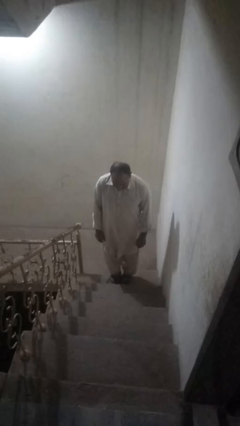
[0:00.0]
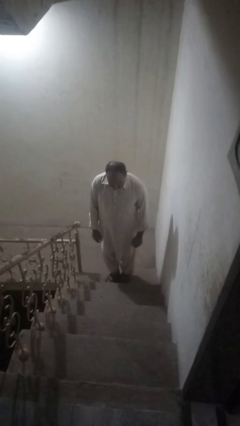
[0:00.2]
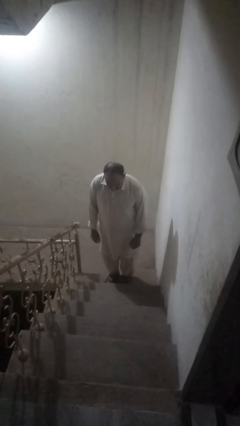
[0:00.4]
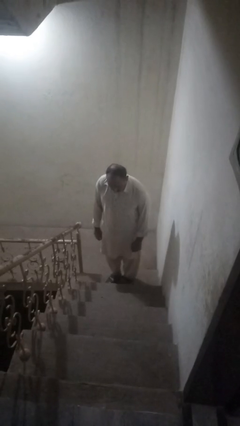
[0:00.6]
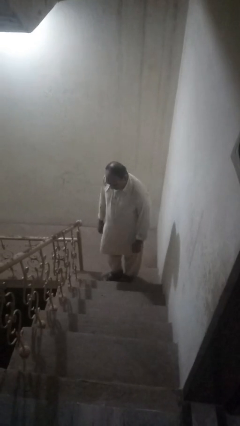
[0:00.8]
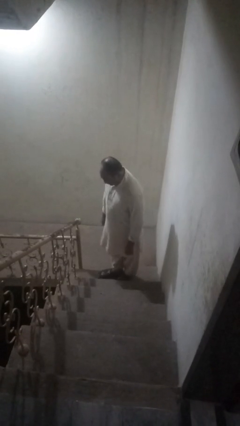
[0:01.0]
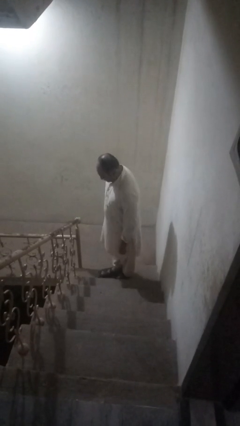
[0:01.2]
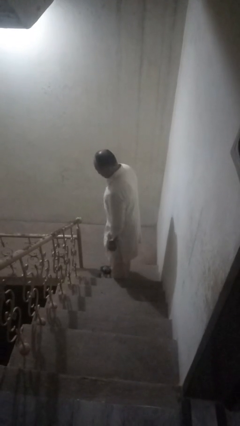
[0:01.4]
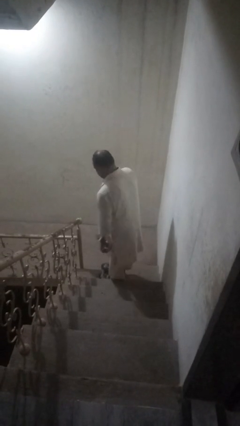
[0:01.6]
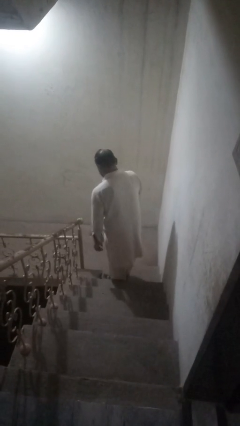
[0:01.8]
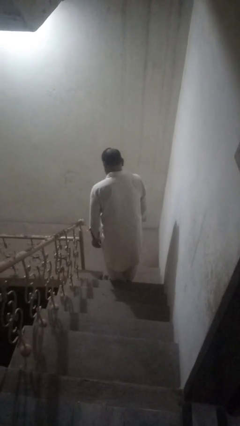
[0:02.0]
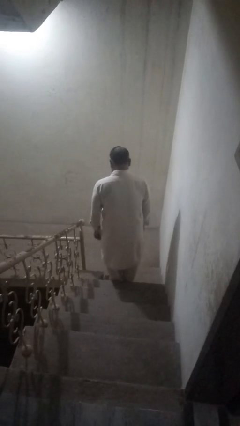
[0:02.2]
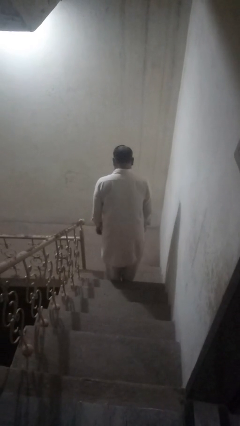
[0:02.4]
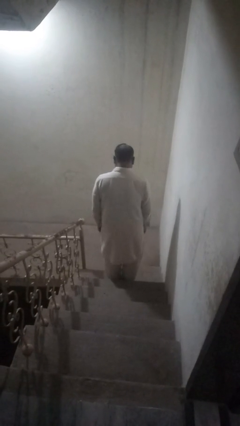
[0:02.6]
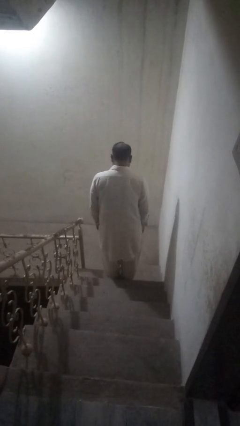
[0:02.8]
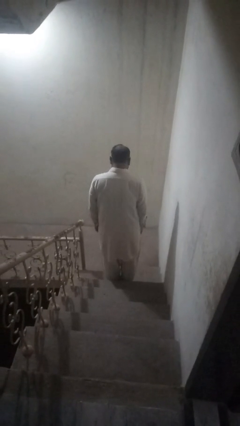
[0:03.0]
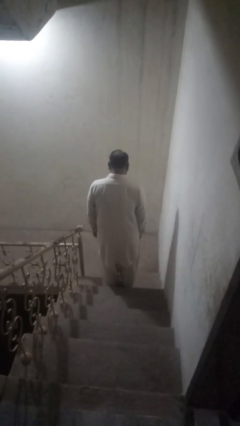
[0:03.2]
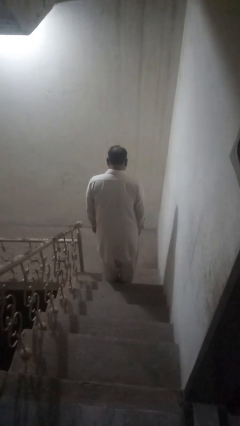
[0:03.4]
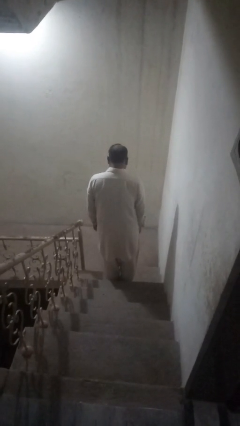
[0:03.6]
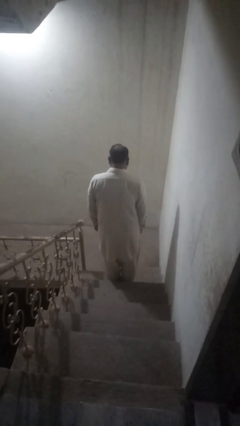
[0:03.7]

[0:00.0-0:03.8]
person climbs up stairs

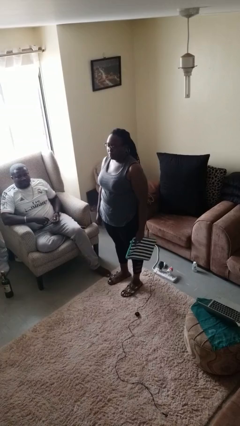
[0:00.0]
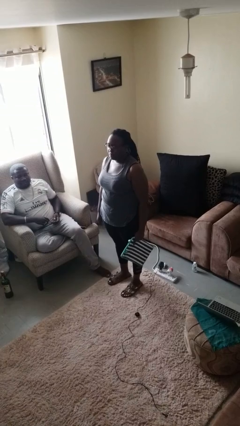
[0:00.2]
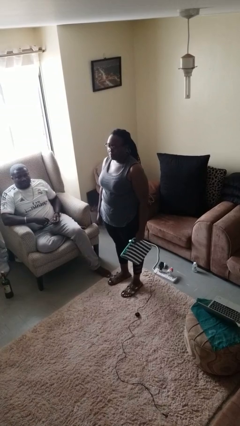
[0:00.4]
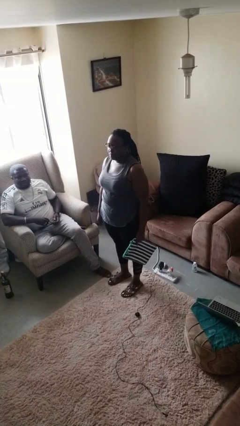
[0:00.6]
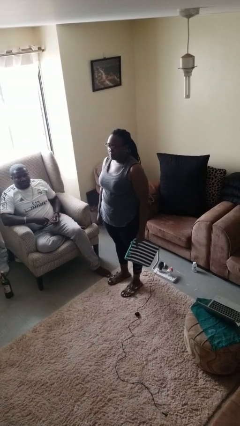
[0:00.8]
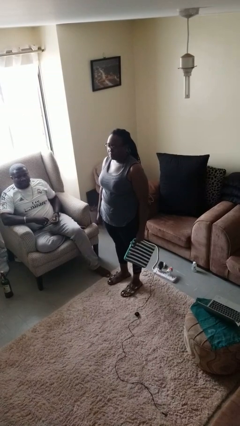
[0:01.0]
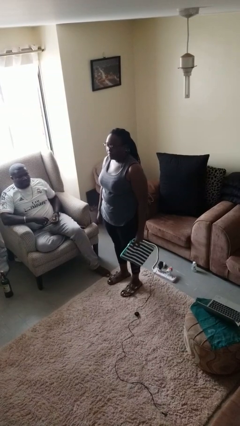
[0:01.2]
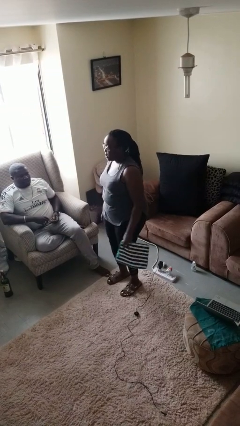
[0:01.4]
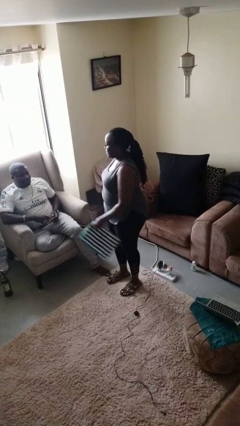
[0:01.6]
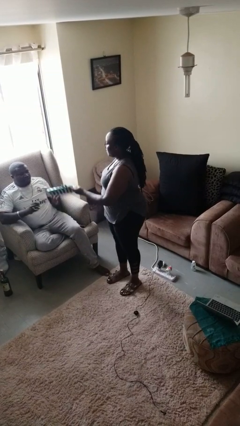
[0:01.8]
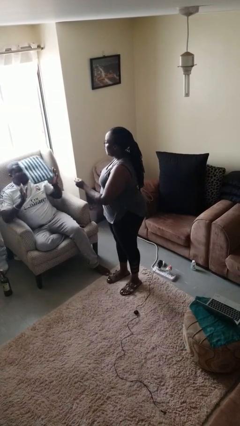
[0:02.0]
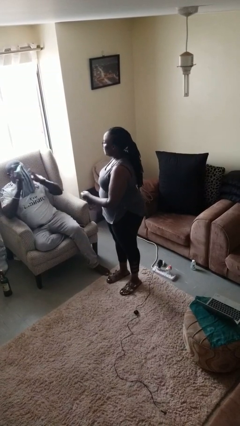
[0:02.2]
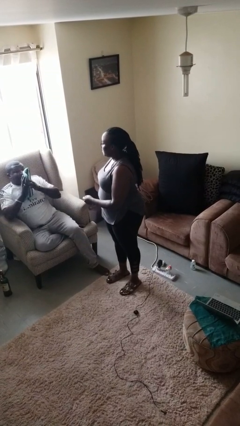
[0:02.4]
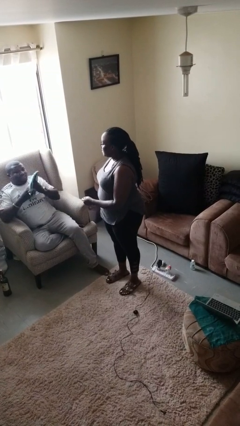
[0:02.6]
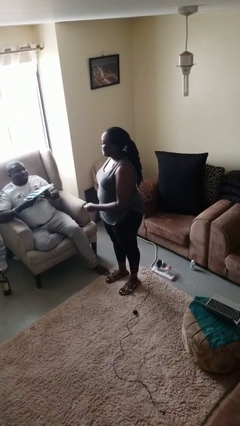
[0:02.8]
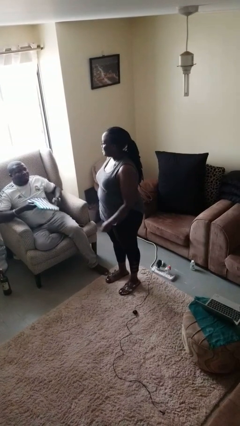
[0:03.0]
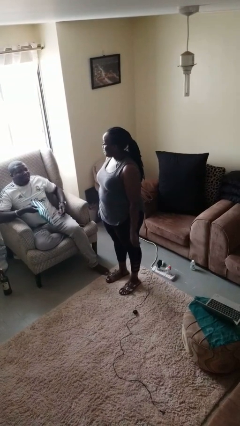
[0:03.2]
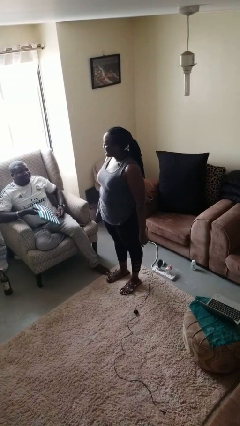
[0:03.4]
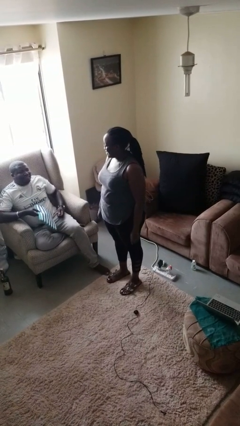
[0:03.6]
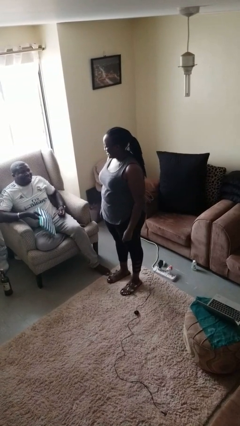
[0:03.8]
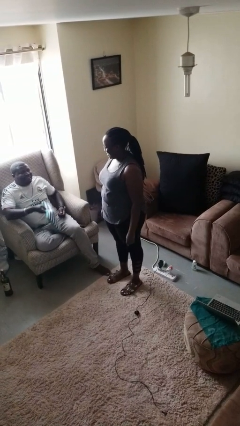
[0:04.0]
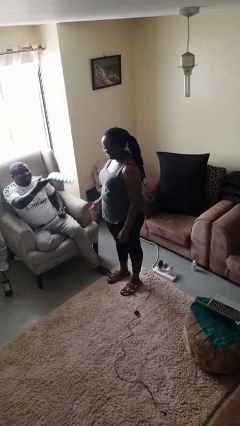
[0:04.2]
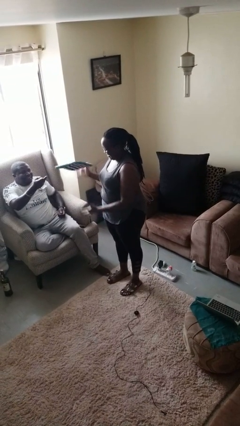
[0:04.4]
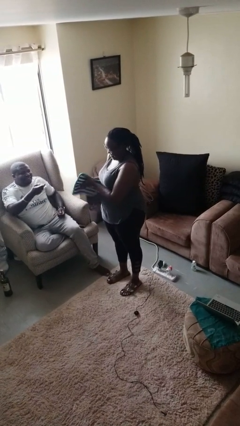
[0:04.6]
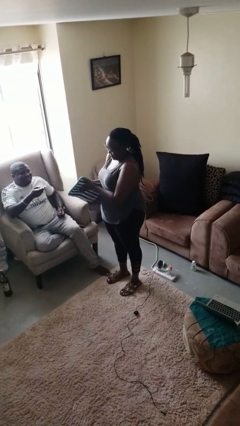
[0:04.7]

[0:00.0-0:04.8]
person throws object to person

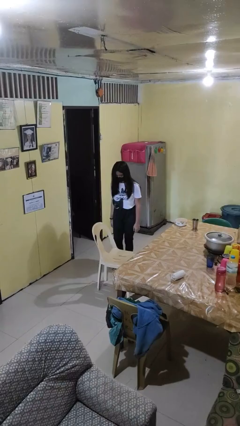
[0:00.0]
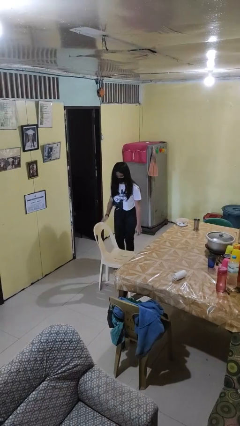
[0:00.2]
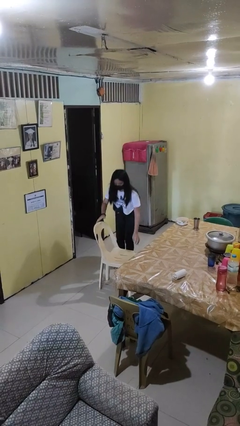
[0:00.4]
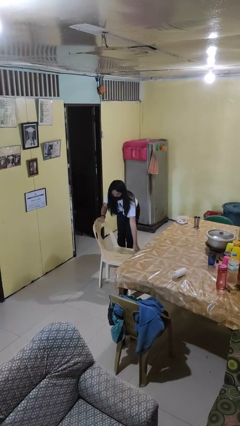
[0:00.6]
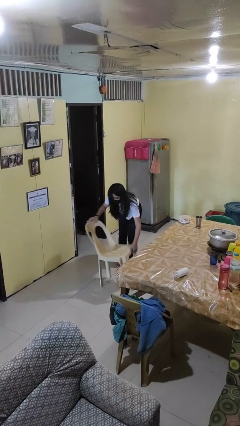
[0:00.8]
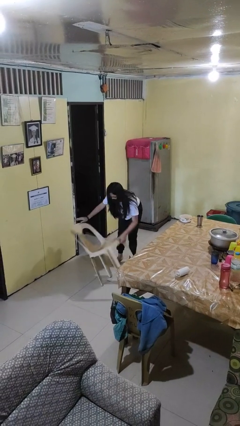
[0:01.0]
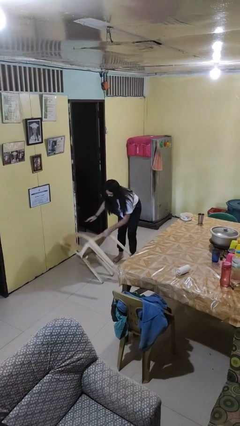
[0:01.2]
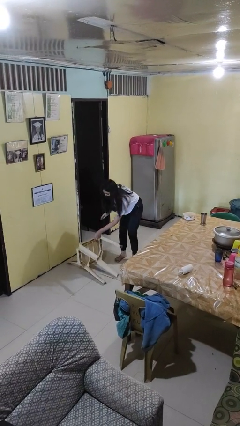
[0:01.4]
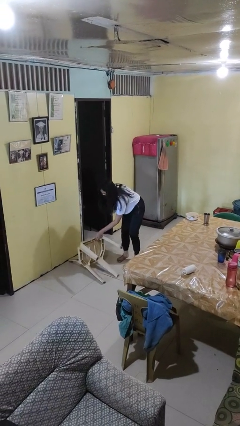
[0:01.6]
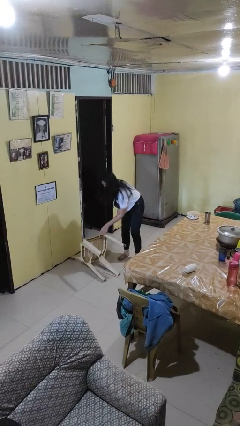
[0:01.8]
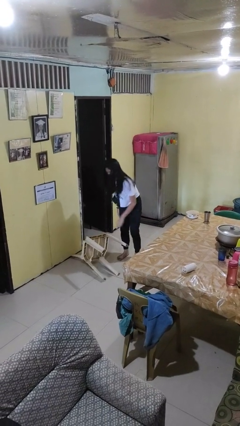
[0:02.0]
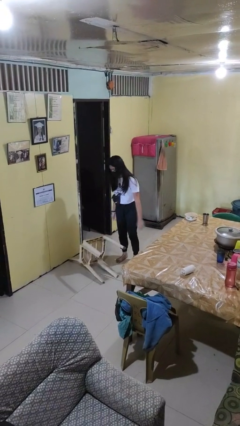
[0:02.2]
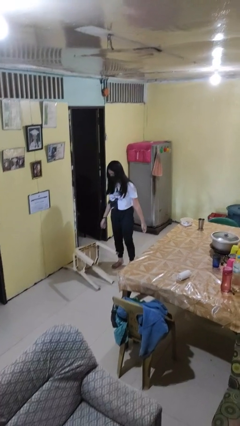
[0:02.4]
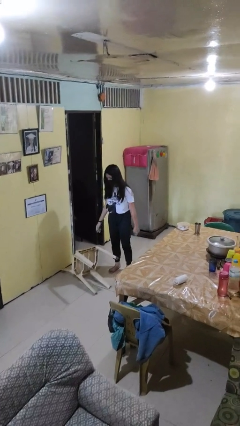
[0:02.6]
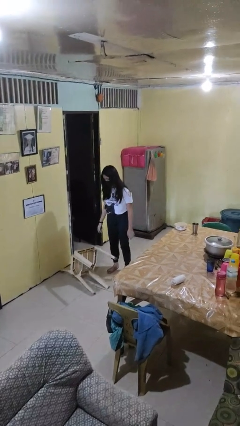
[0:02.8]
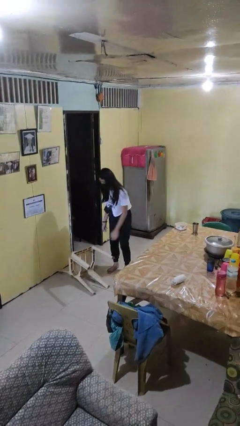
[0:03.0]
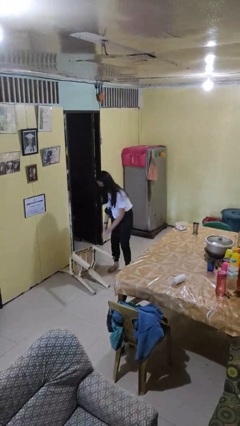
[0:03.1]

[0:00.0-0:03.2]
person knocks over furniture

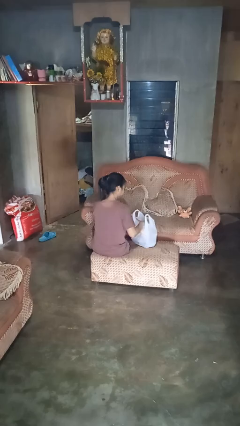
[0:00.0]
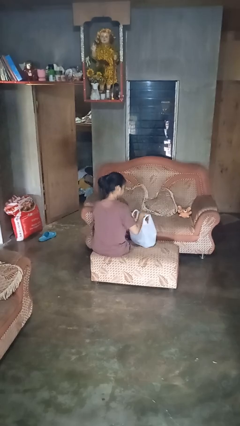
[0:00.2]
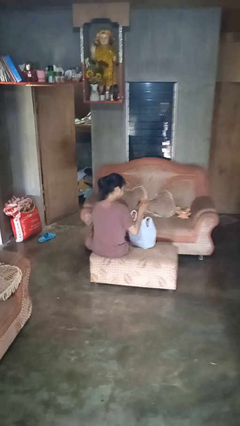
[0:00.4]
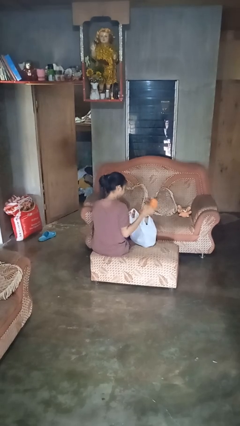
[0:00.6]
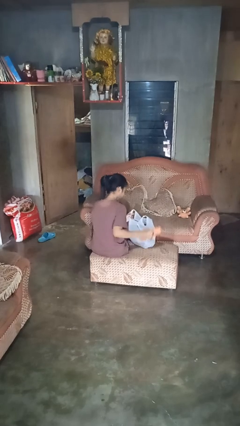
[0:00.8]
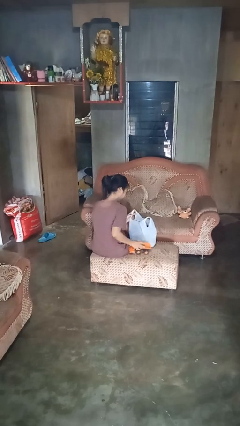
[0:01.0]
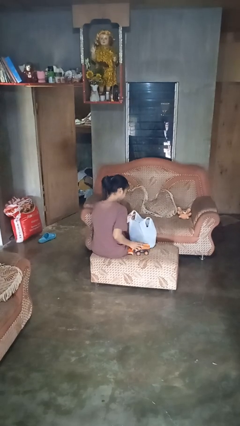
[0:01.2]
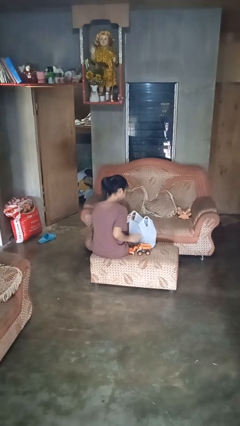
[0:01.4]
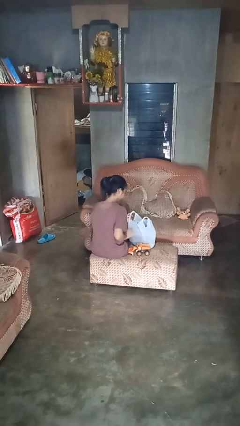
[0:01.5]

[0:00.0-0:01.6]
person takes object from bag

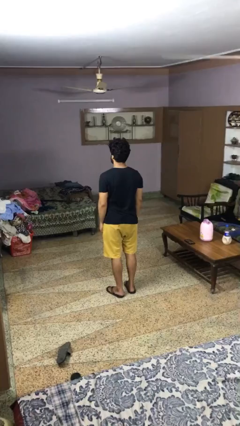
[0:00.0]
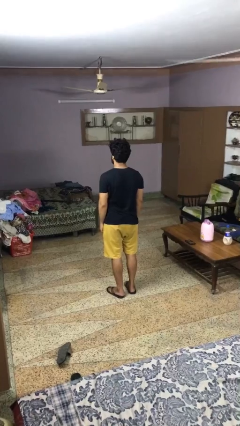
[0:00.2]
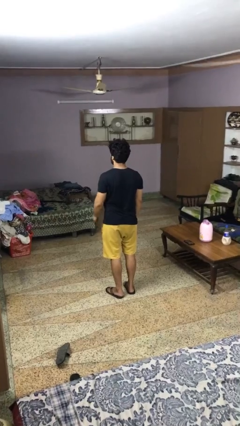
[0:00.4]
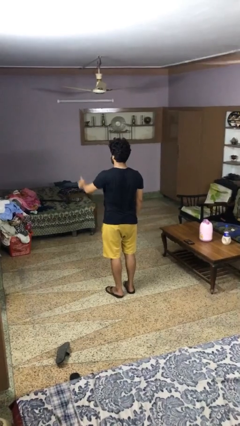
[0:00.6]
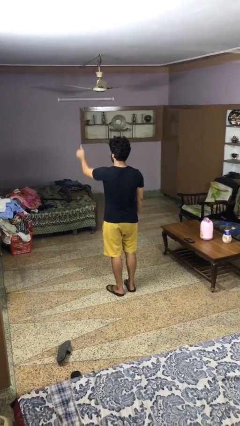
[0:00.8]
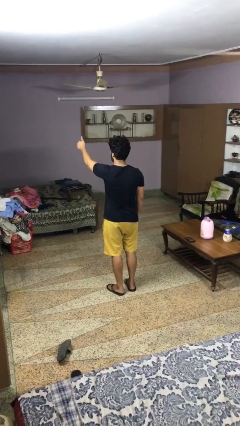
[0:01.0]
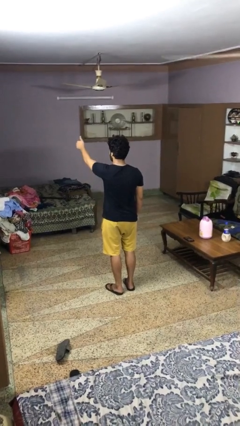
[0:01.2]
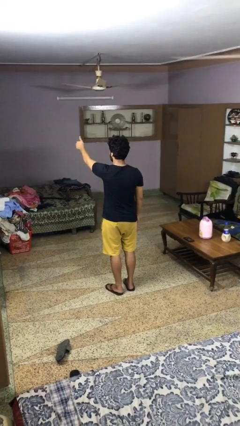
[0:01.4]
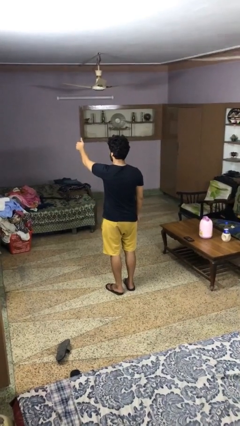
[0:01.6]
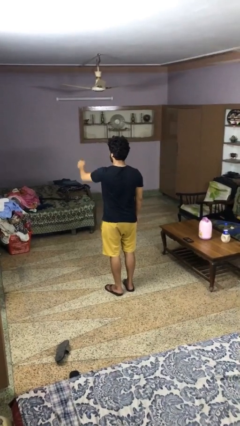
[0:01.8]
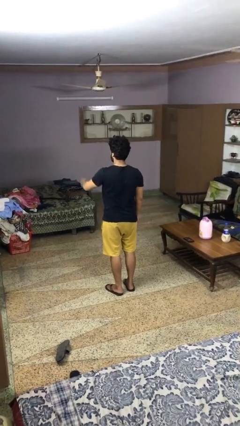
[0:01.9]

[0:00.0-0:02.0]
person gestures thumbs up

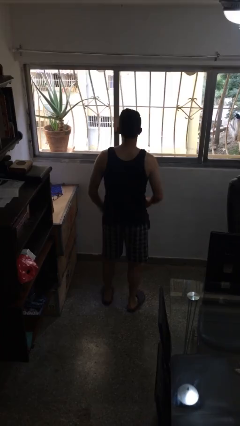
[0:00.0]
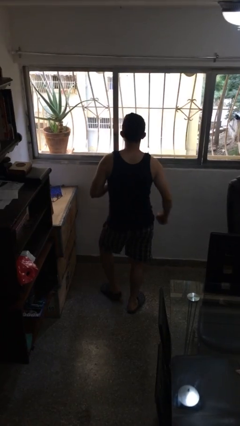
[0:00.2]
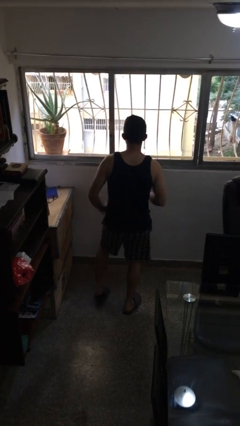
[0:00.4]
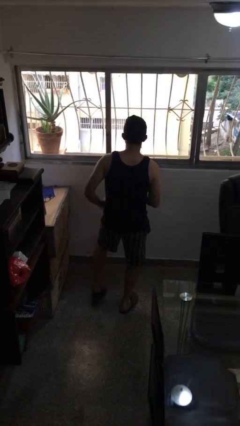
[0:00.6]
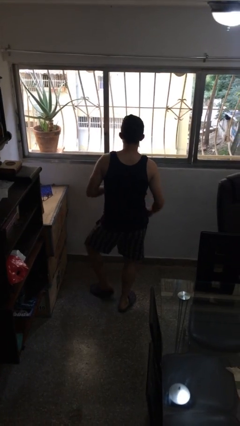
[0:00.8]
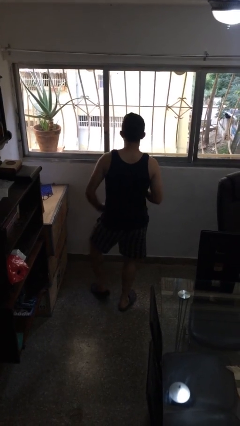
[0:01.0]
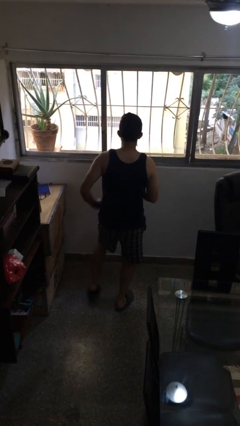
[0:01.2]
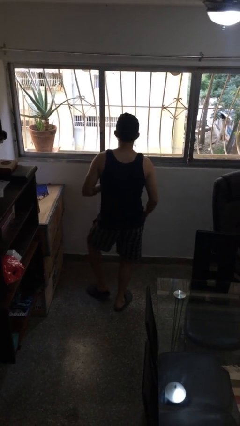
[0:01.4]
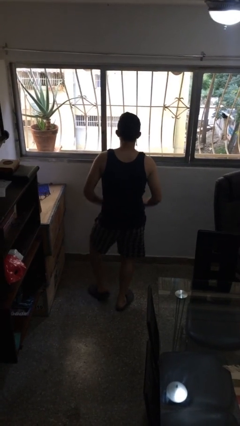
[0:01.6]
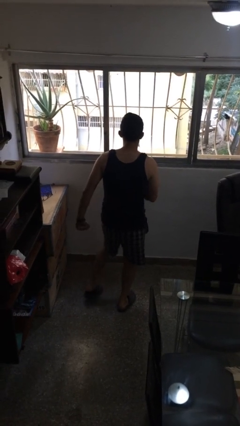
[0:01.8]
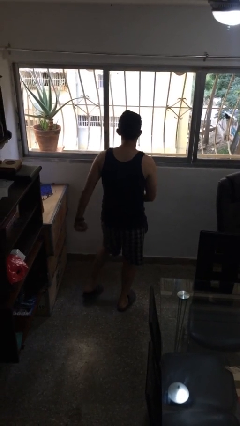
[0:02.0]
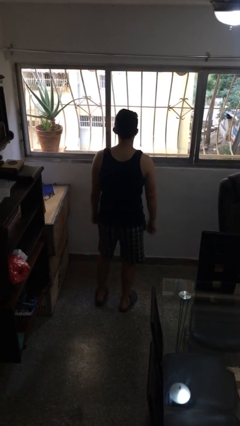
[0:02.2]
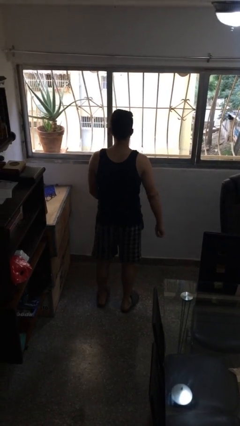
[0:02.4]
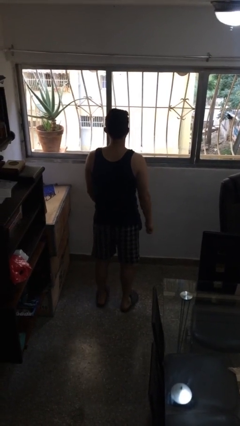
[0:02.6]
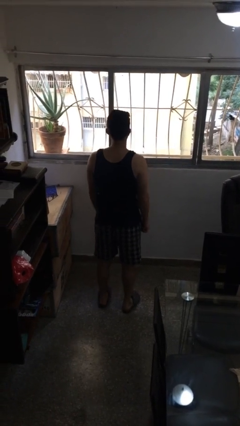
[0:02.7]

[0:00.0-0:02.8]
person dances in place
